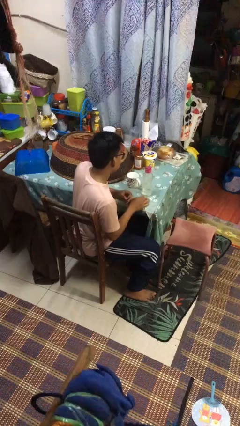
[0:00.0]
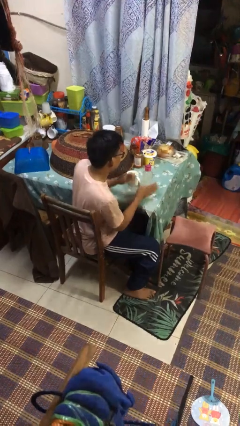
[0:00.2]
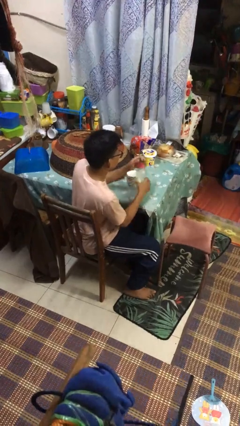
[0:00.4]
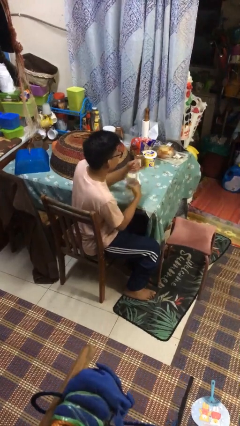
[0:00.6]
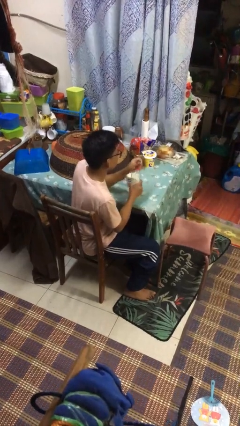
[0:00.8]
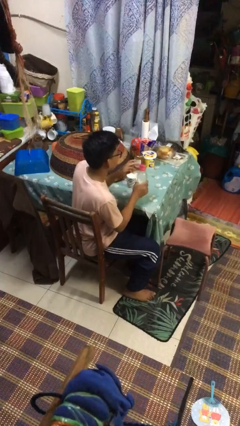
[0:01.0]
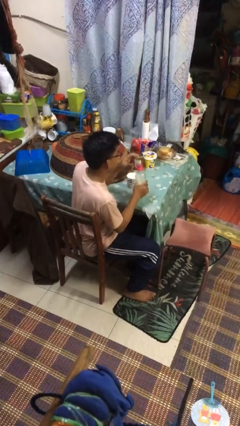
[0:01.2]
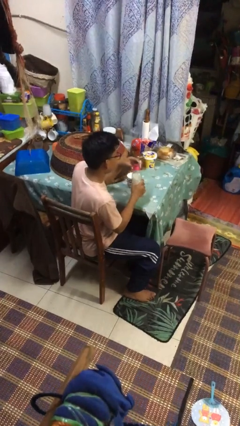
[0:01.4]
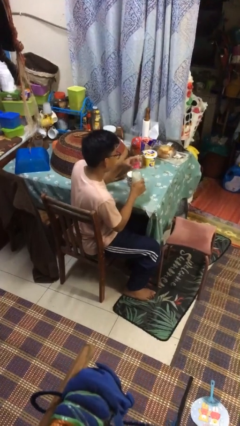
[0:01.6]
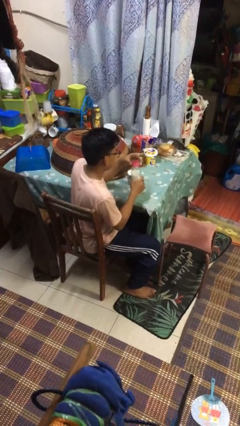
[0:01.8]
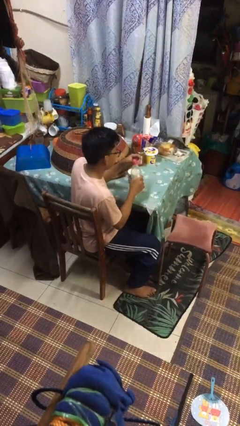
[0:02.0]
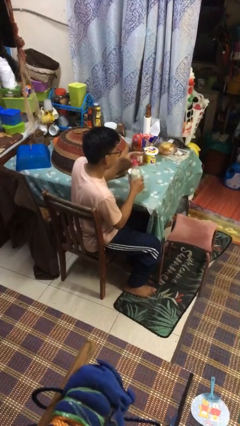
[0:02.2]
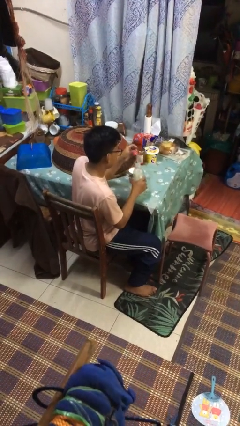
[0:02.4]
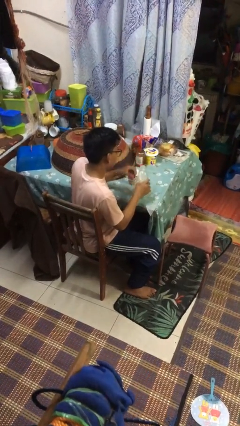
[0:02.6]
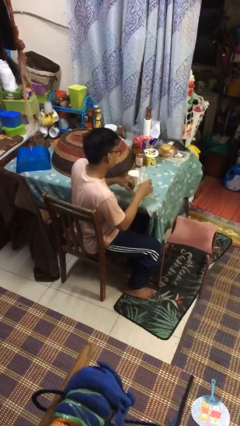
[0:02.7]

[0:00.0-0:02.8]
person unscrews lid from bottle

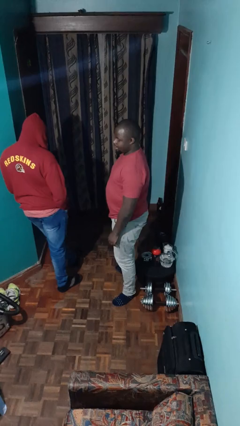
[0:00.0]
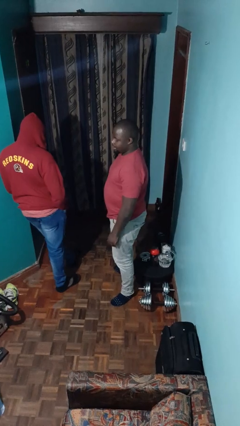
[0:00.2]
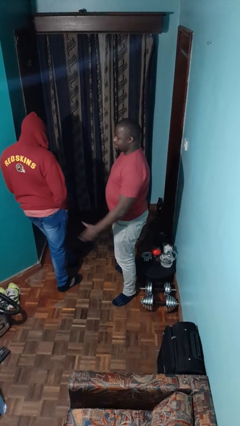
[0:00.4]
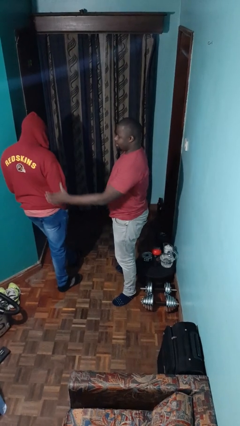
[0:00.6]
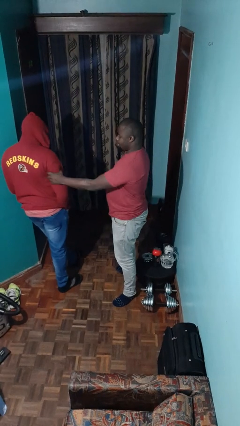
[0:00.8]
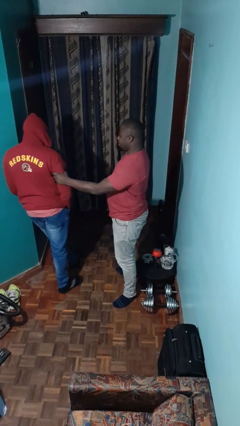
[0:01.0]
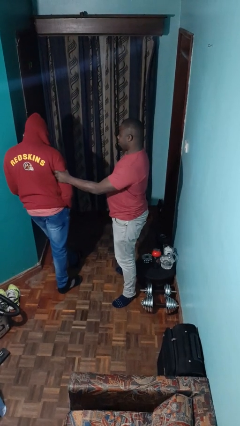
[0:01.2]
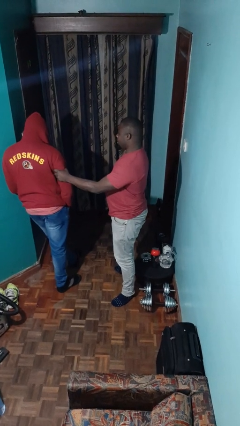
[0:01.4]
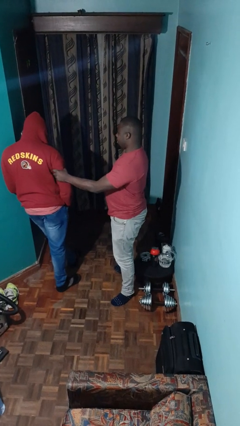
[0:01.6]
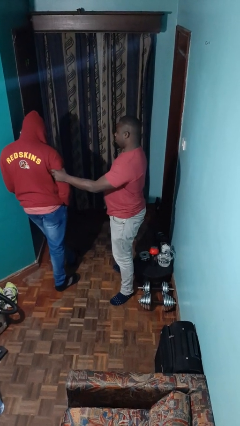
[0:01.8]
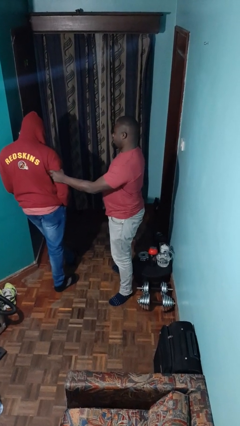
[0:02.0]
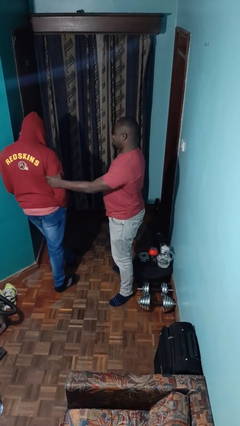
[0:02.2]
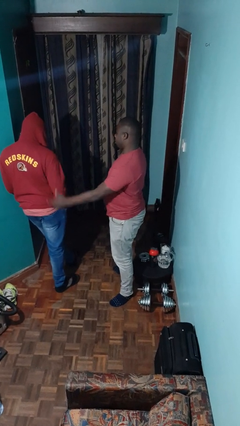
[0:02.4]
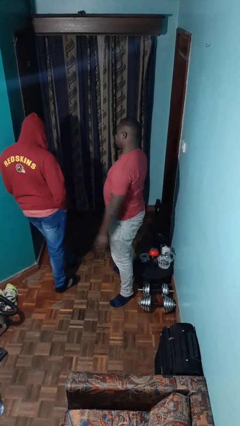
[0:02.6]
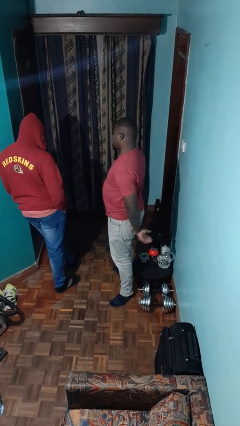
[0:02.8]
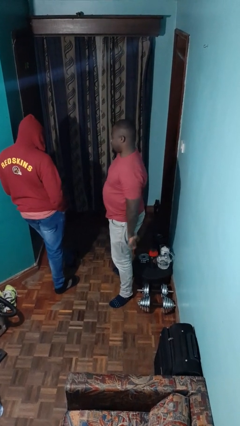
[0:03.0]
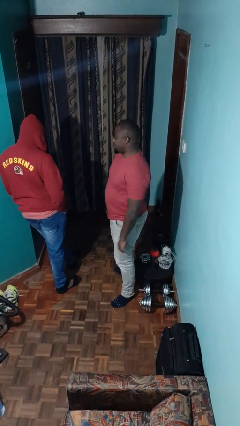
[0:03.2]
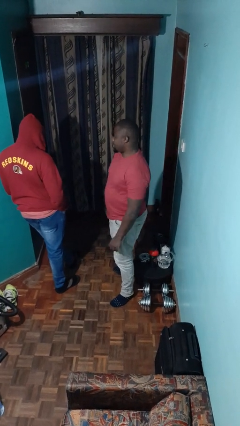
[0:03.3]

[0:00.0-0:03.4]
person grabs person by bicep

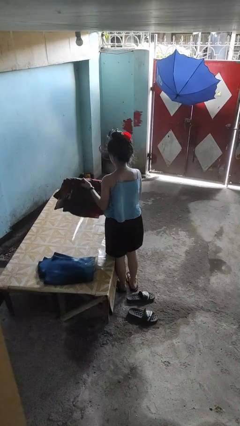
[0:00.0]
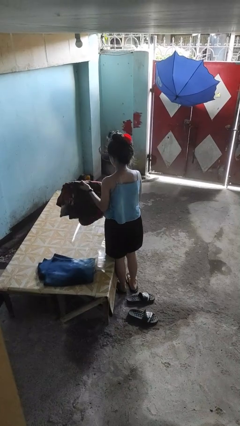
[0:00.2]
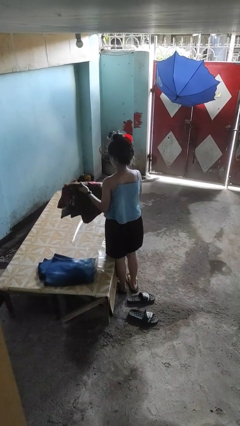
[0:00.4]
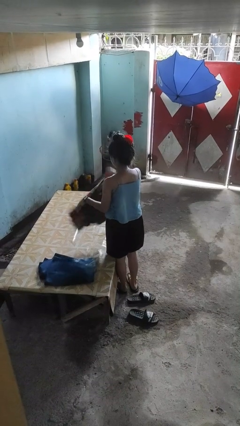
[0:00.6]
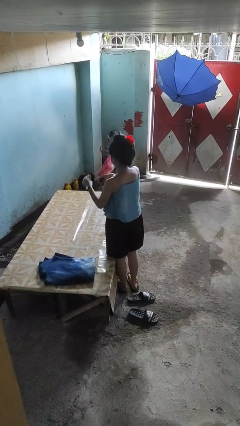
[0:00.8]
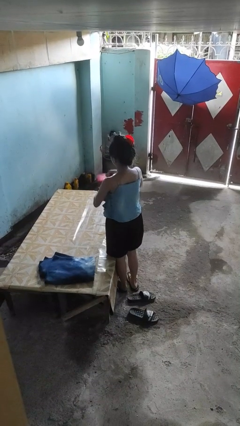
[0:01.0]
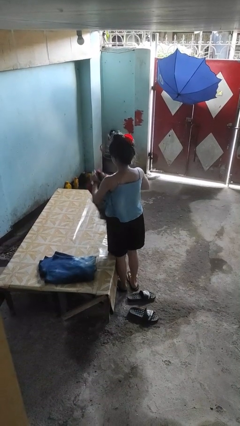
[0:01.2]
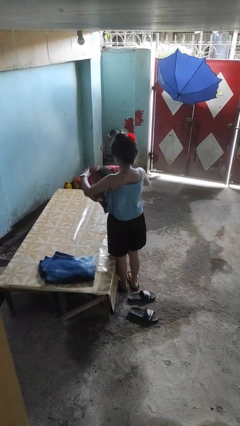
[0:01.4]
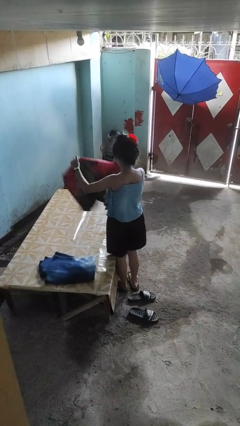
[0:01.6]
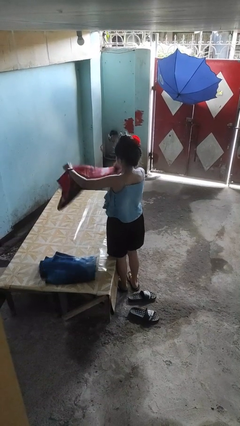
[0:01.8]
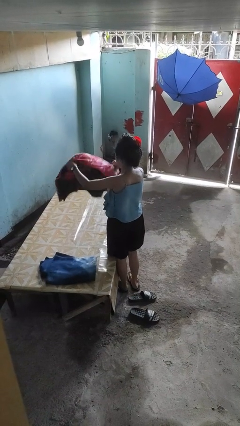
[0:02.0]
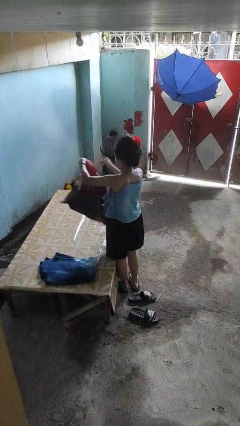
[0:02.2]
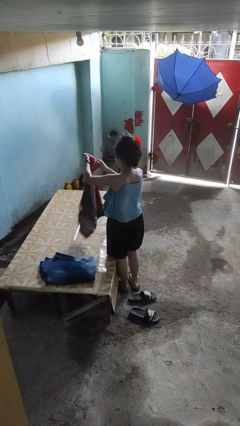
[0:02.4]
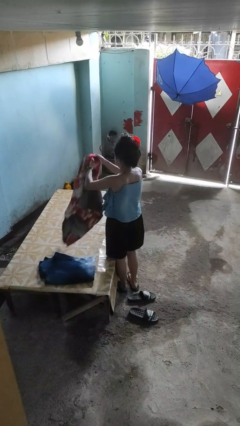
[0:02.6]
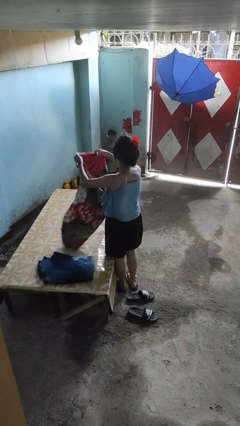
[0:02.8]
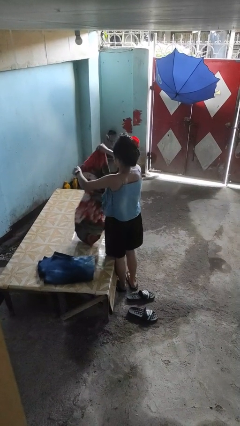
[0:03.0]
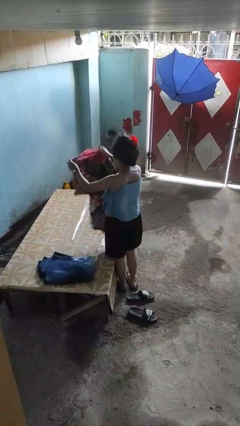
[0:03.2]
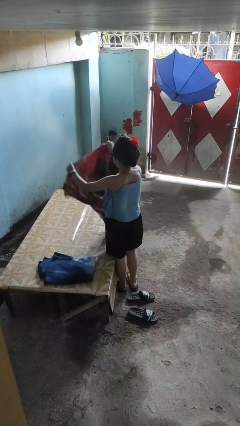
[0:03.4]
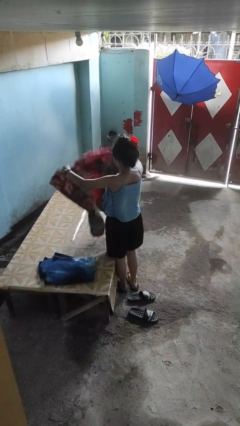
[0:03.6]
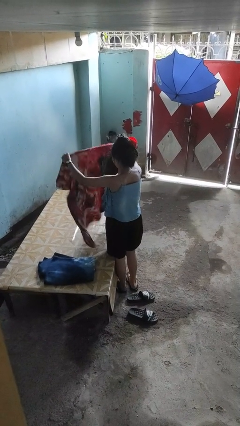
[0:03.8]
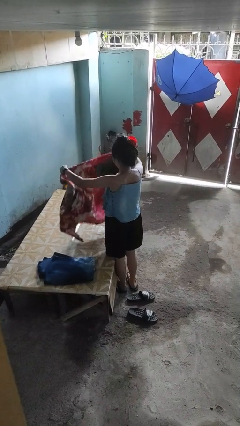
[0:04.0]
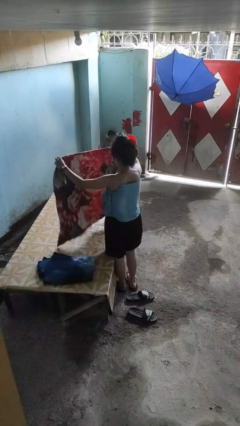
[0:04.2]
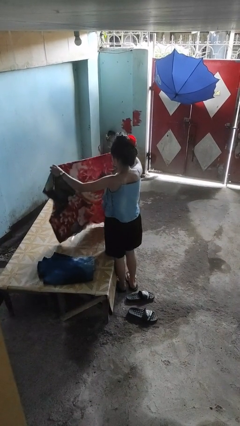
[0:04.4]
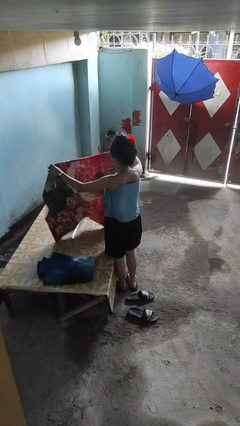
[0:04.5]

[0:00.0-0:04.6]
person unfolds blanket

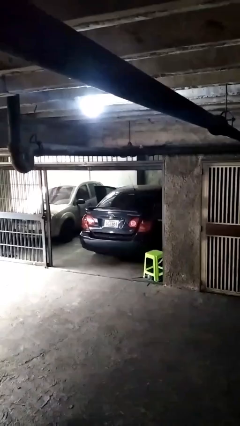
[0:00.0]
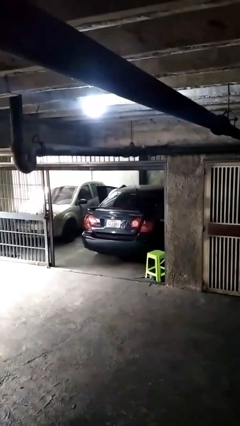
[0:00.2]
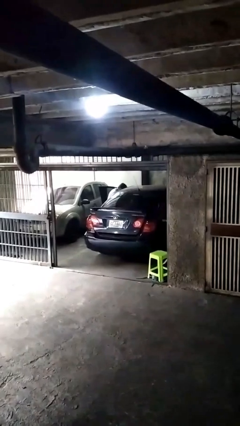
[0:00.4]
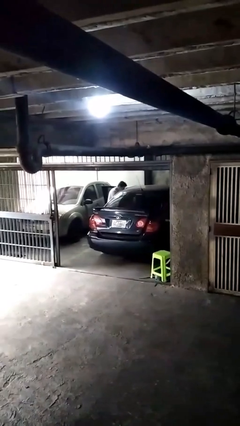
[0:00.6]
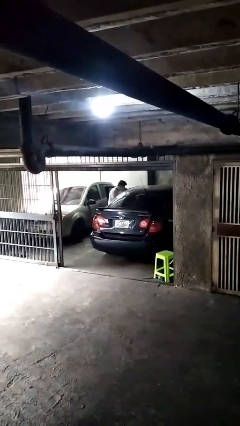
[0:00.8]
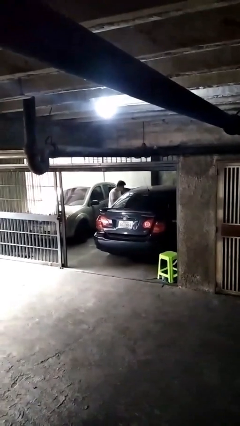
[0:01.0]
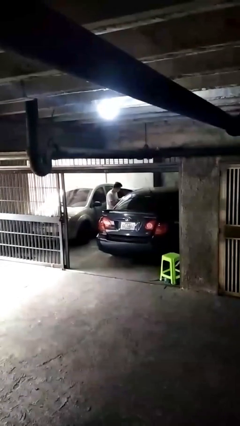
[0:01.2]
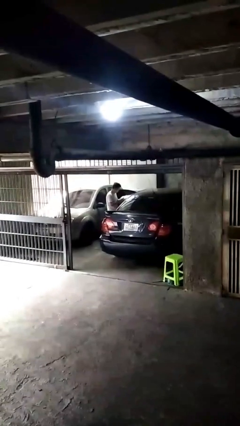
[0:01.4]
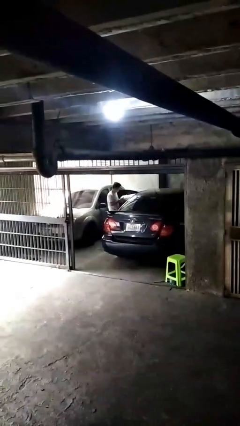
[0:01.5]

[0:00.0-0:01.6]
person unloads car

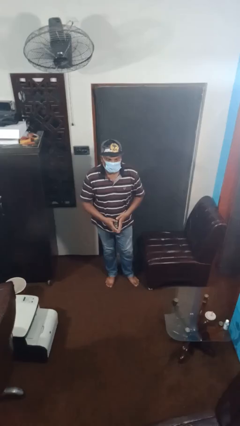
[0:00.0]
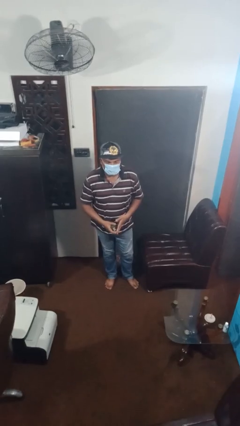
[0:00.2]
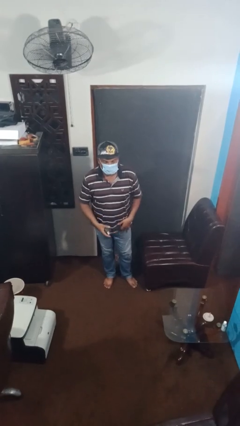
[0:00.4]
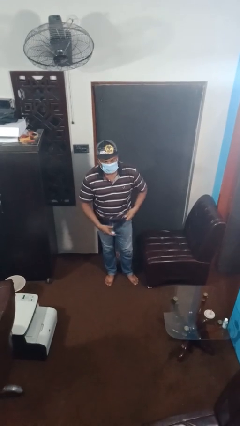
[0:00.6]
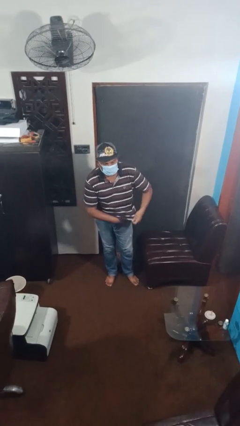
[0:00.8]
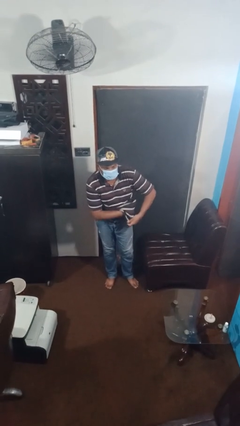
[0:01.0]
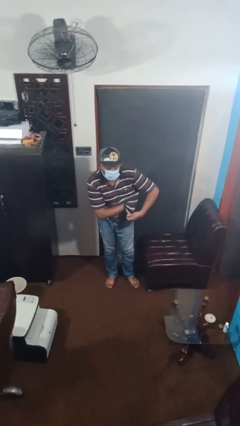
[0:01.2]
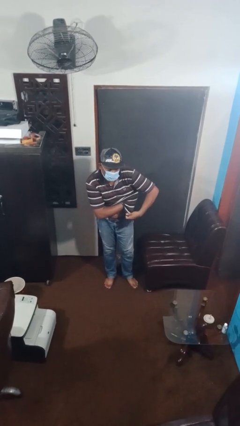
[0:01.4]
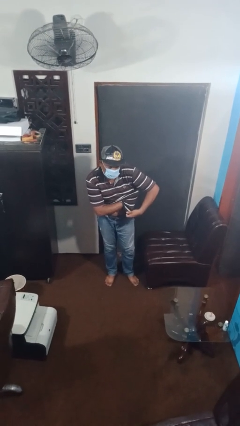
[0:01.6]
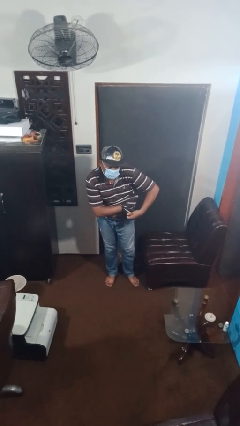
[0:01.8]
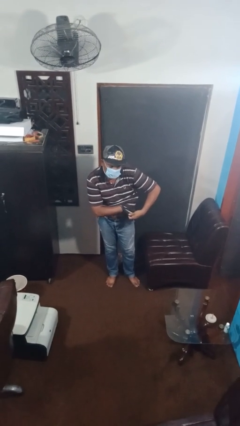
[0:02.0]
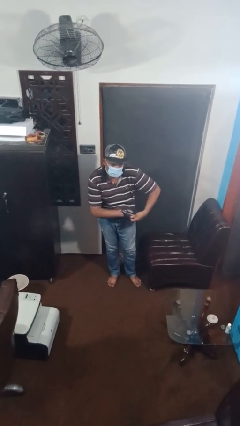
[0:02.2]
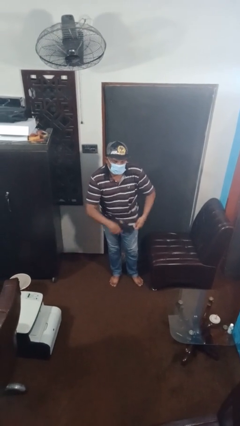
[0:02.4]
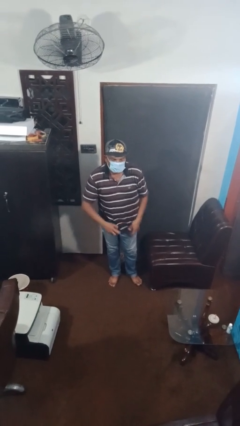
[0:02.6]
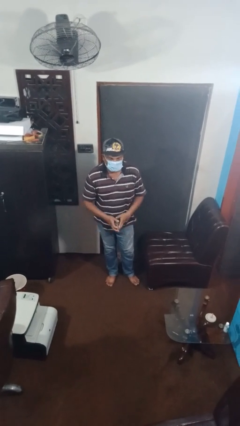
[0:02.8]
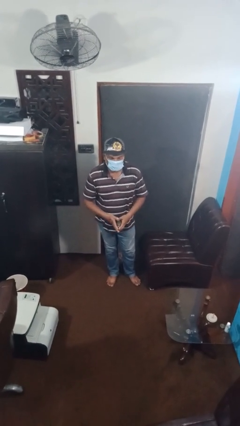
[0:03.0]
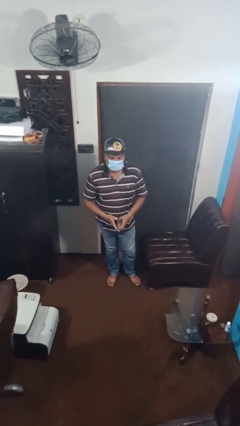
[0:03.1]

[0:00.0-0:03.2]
person applies deodorant

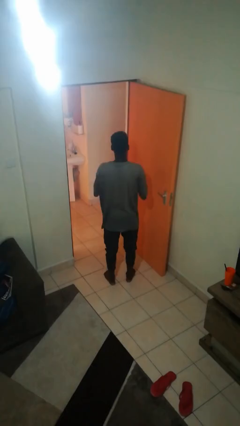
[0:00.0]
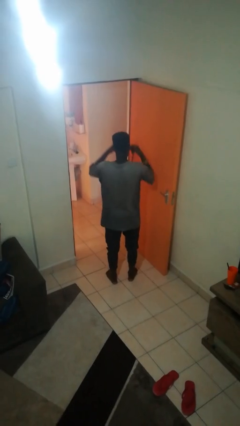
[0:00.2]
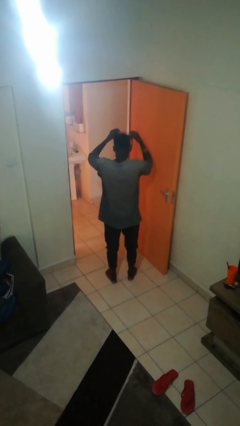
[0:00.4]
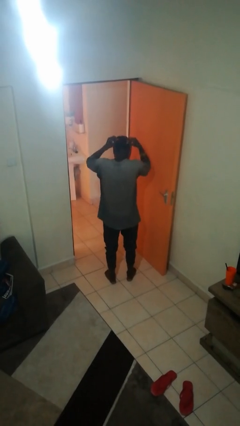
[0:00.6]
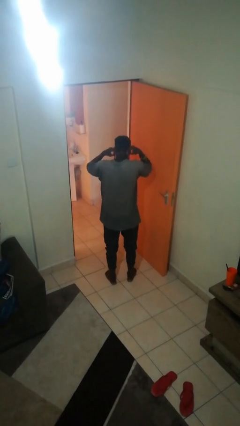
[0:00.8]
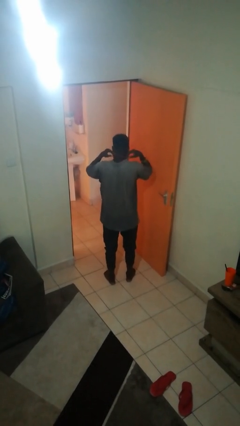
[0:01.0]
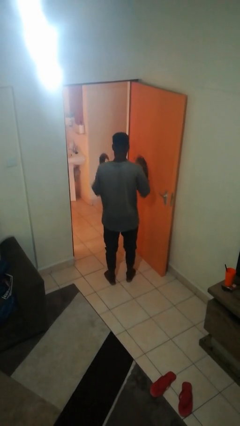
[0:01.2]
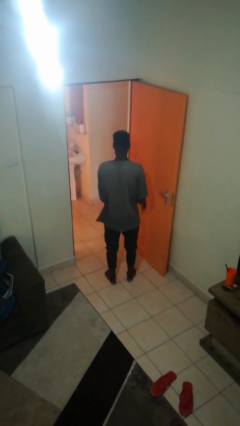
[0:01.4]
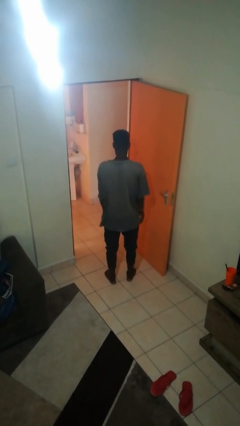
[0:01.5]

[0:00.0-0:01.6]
person puts on necklace

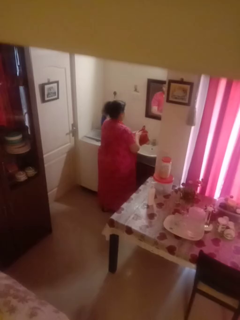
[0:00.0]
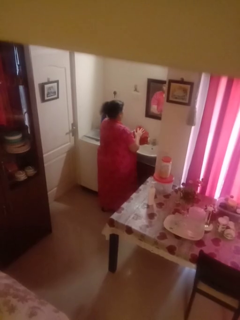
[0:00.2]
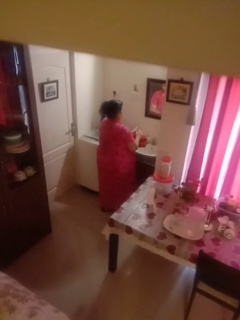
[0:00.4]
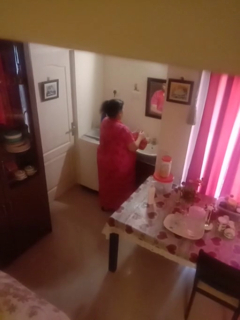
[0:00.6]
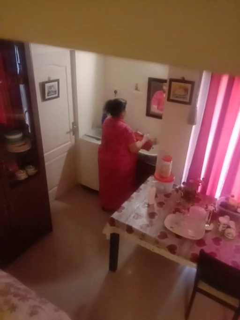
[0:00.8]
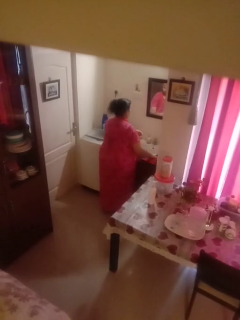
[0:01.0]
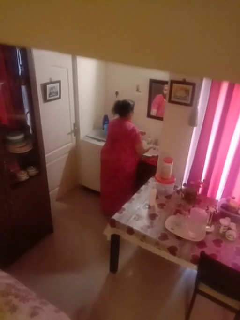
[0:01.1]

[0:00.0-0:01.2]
person dries hands with towel
